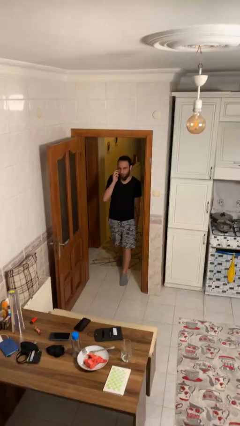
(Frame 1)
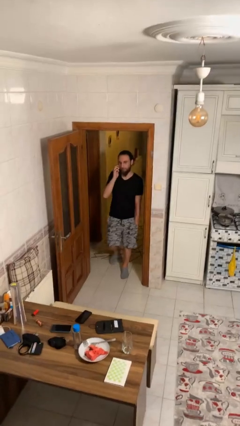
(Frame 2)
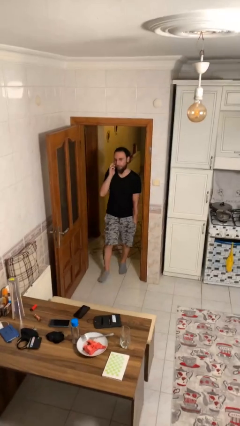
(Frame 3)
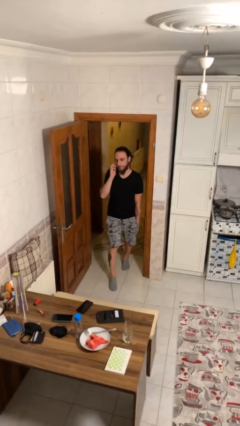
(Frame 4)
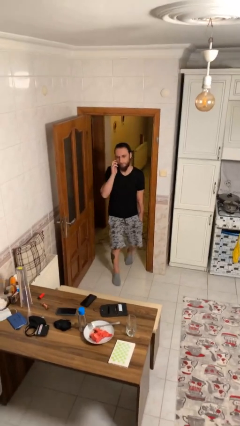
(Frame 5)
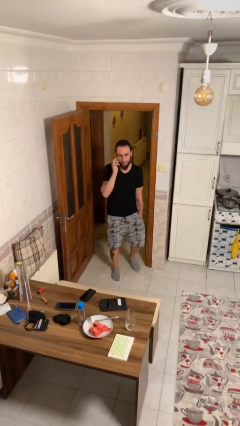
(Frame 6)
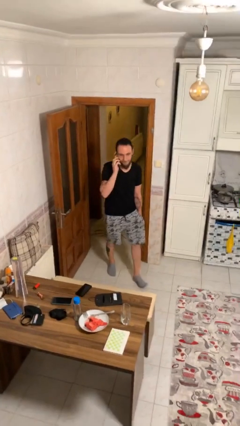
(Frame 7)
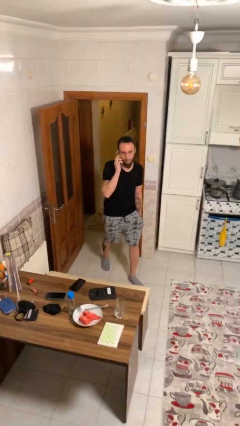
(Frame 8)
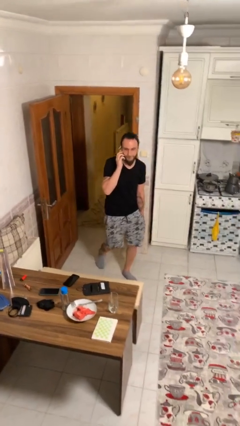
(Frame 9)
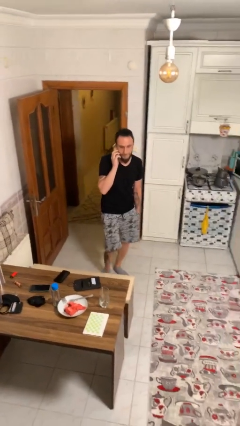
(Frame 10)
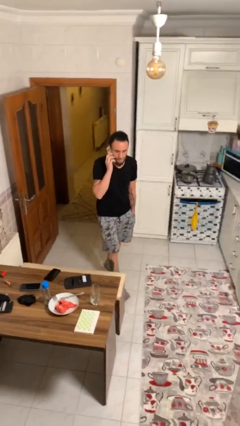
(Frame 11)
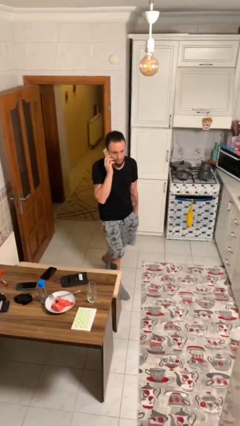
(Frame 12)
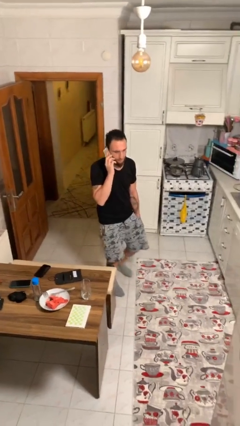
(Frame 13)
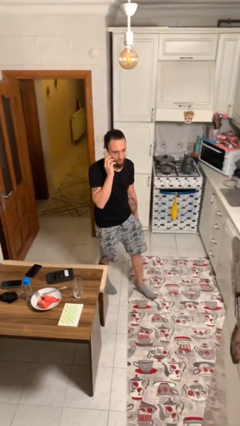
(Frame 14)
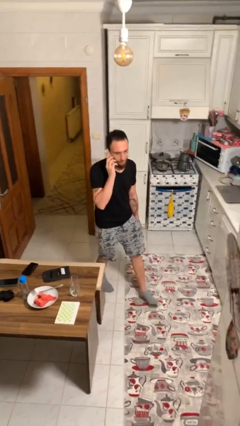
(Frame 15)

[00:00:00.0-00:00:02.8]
person enters scene through structure

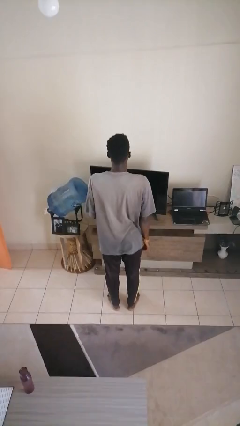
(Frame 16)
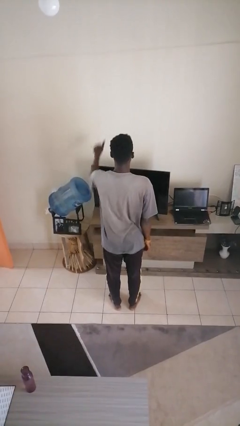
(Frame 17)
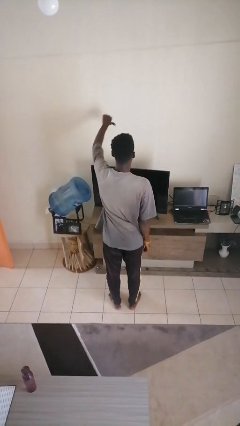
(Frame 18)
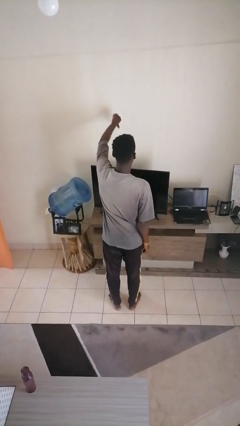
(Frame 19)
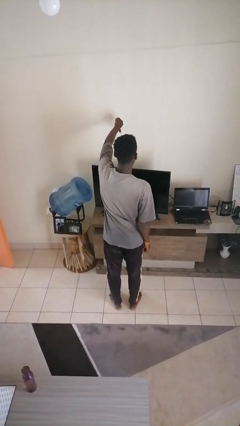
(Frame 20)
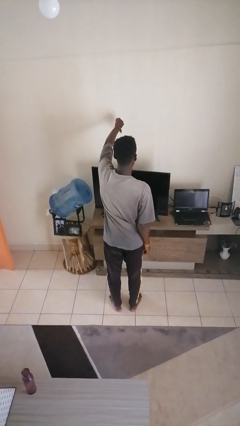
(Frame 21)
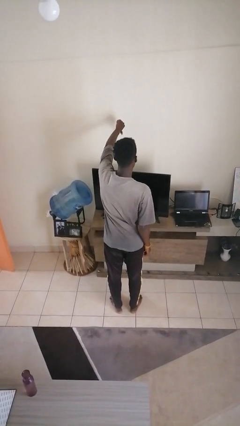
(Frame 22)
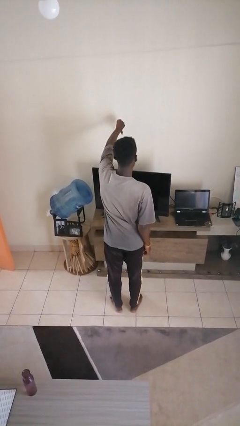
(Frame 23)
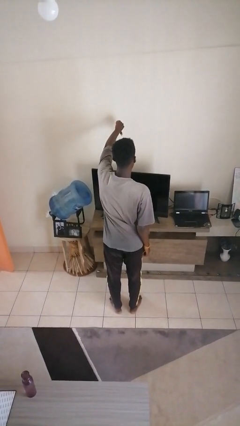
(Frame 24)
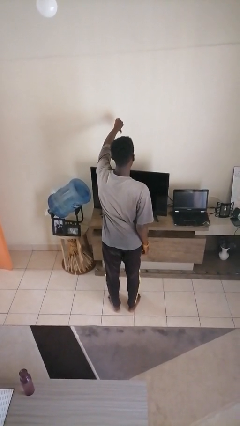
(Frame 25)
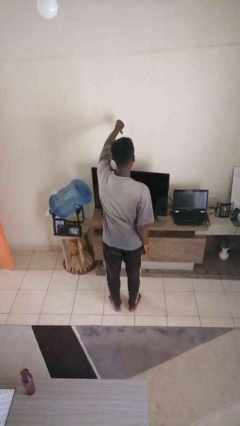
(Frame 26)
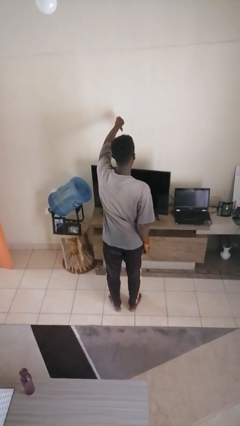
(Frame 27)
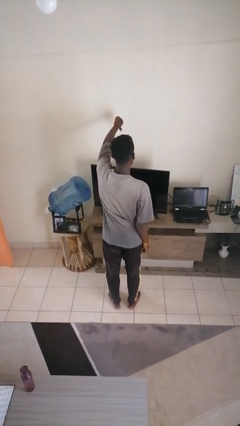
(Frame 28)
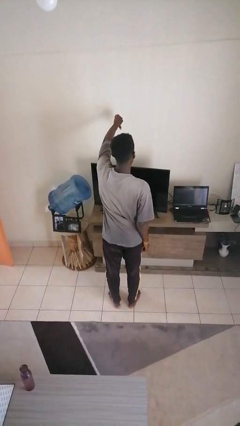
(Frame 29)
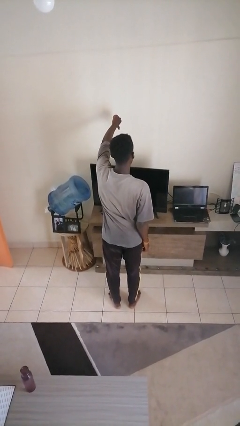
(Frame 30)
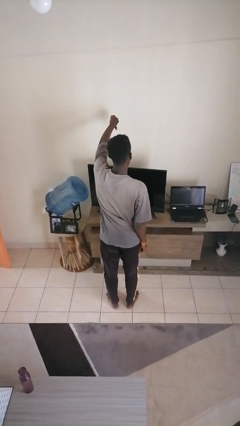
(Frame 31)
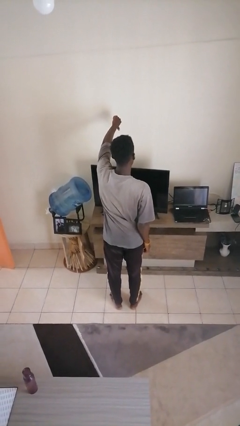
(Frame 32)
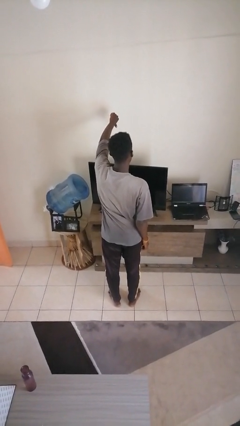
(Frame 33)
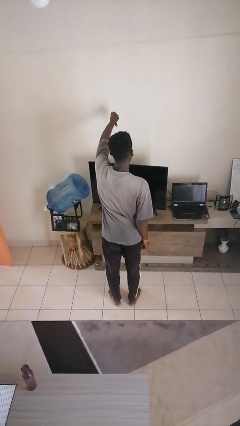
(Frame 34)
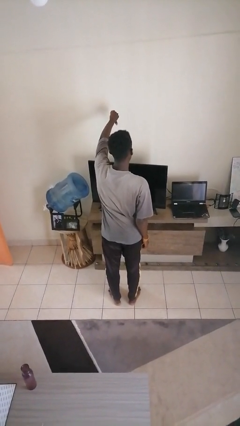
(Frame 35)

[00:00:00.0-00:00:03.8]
person gestures thumbs down

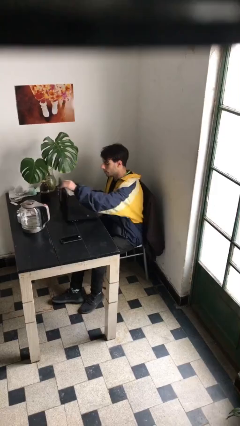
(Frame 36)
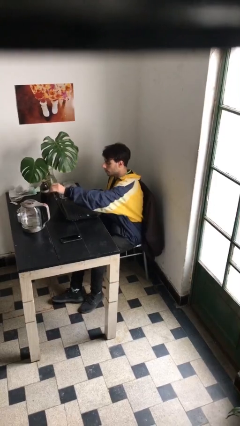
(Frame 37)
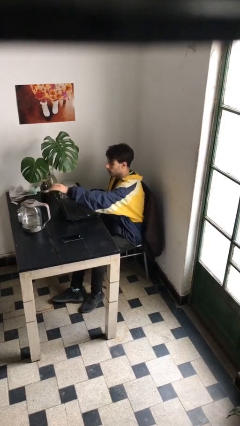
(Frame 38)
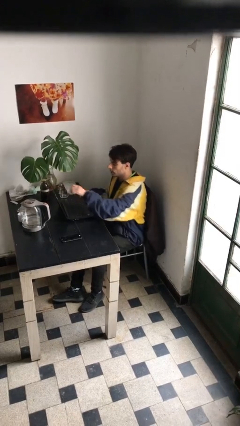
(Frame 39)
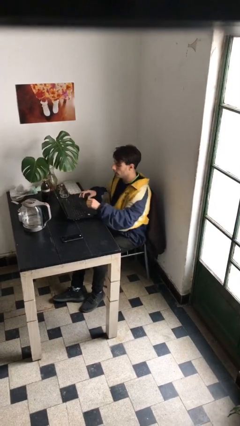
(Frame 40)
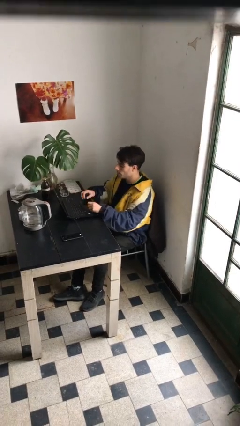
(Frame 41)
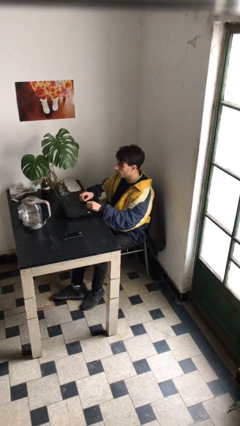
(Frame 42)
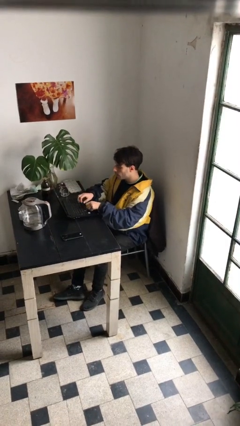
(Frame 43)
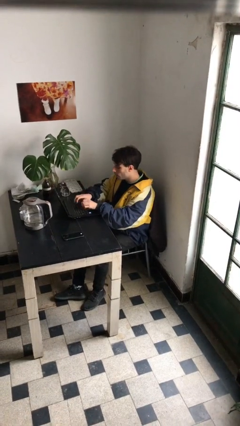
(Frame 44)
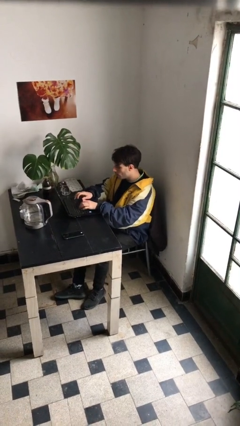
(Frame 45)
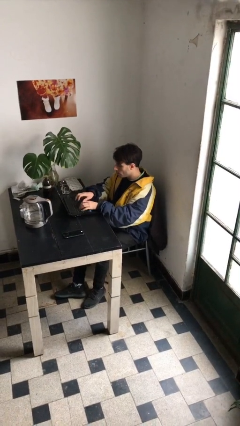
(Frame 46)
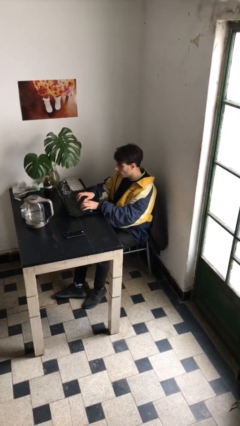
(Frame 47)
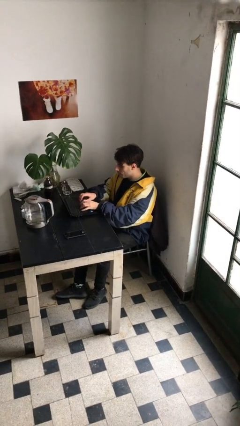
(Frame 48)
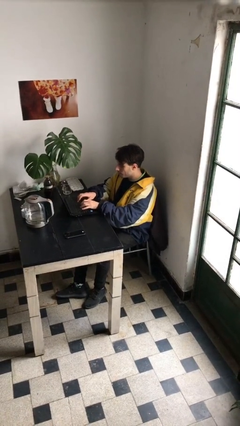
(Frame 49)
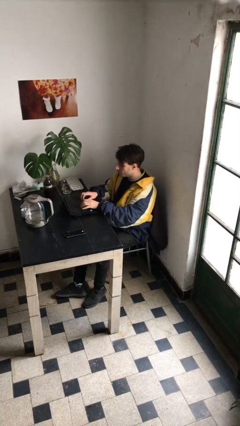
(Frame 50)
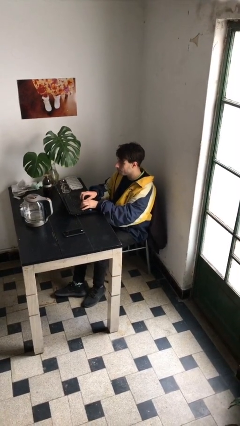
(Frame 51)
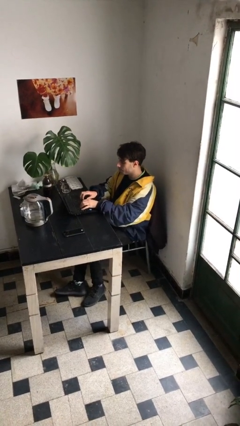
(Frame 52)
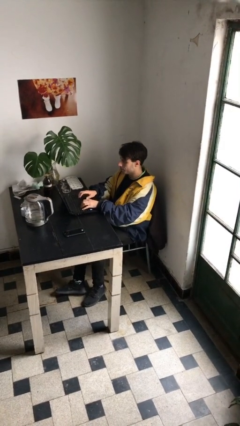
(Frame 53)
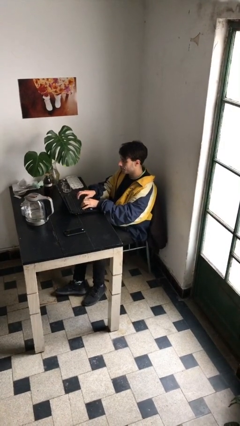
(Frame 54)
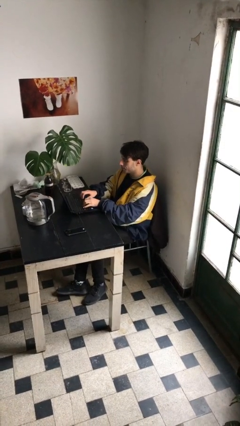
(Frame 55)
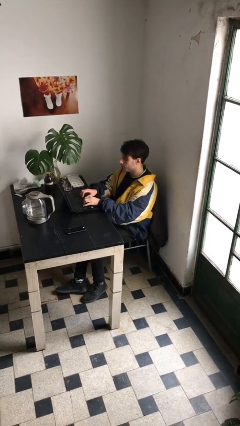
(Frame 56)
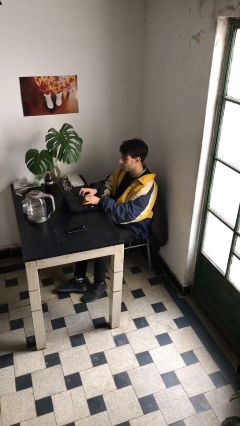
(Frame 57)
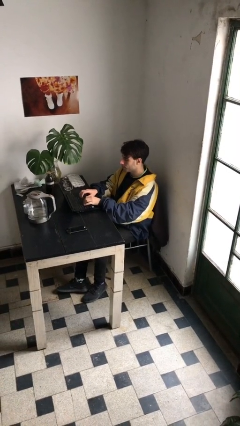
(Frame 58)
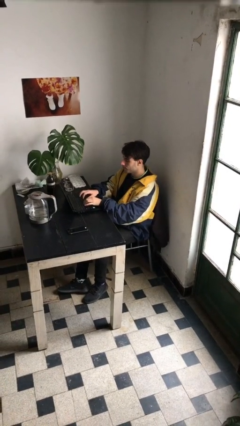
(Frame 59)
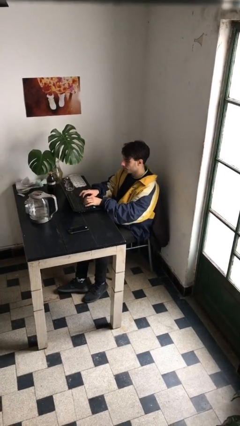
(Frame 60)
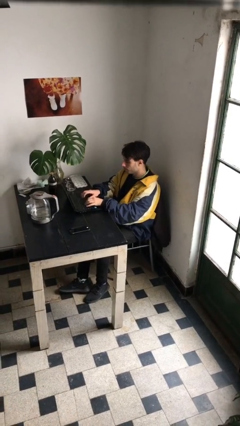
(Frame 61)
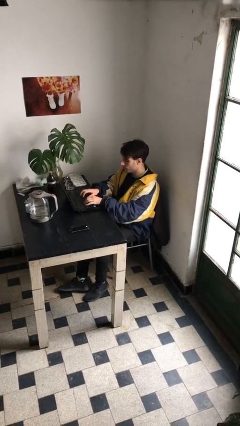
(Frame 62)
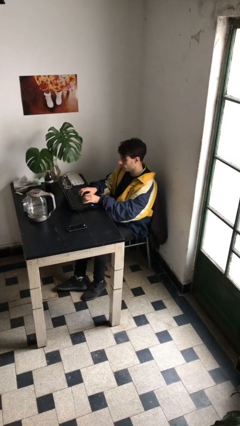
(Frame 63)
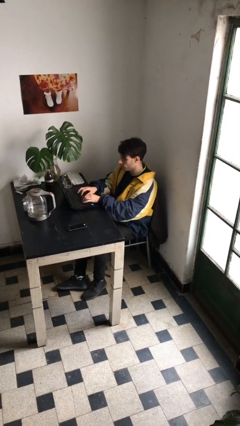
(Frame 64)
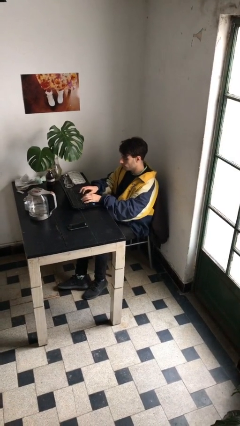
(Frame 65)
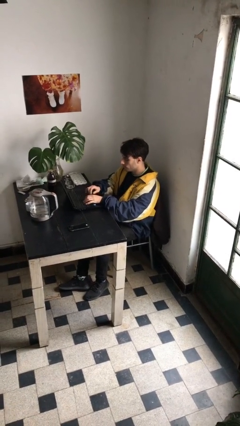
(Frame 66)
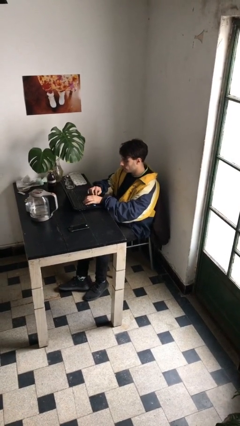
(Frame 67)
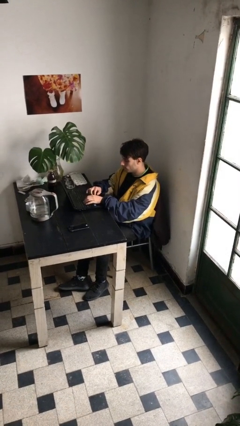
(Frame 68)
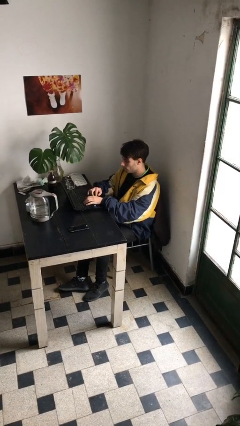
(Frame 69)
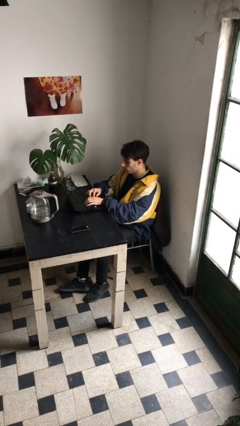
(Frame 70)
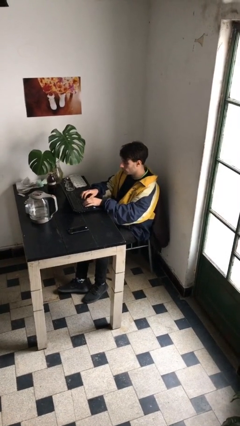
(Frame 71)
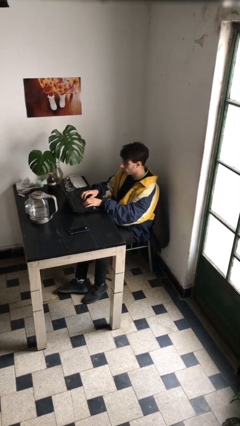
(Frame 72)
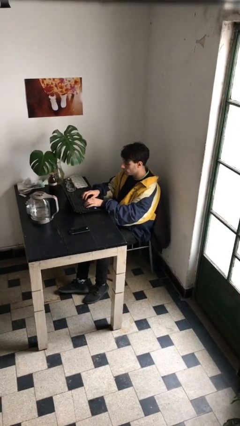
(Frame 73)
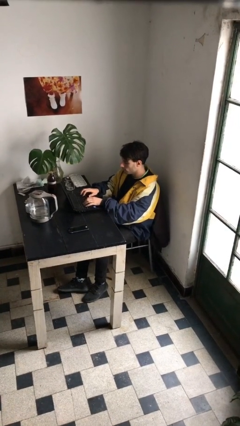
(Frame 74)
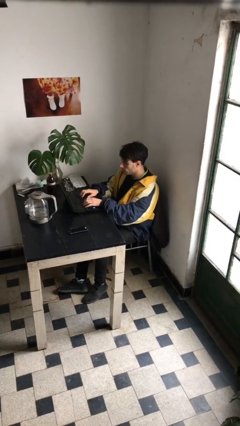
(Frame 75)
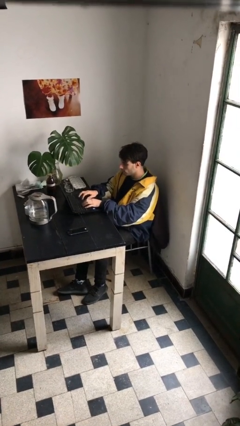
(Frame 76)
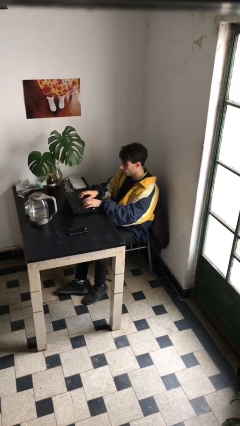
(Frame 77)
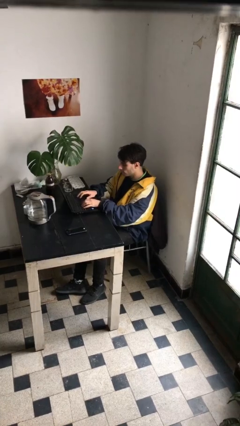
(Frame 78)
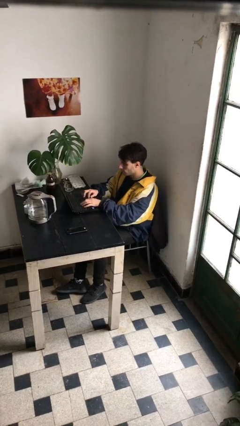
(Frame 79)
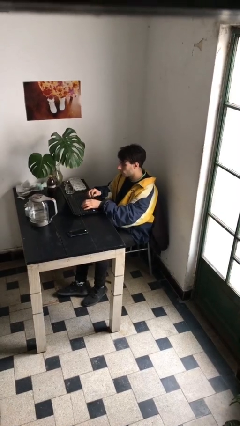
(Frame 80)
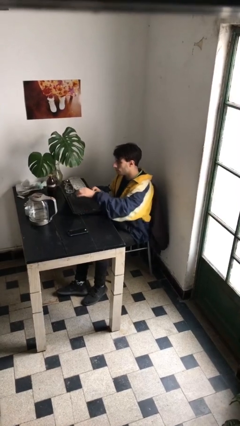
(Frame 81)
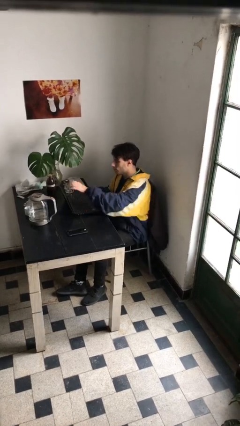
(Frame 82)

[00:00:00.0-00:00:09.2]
person interacts with laptop

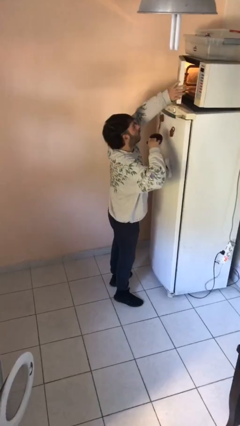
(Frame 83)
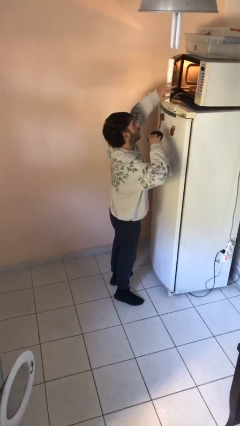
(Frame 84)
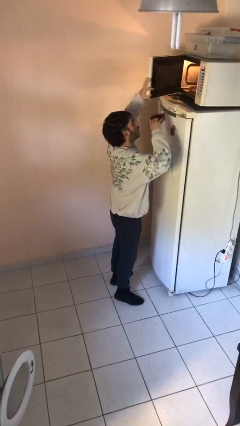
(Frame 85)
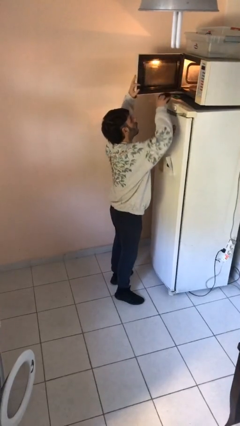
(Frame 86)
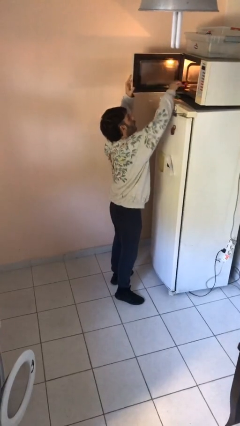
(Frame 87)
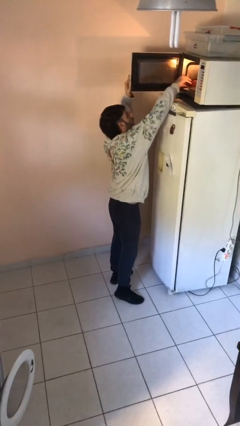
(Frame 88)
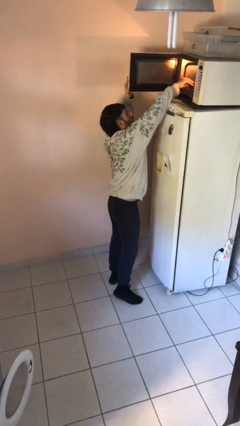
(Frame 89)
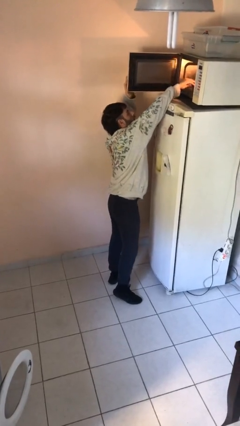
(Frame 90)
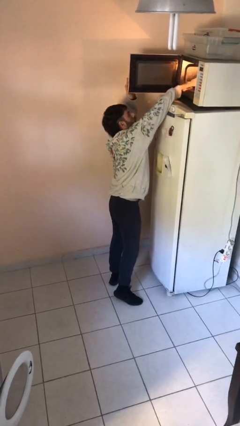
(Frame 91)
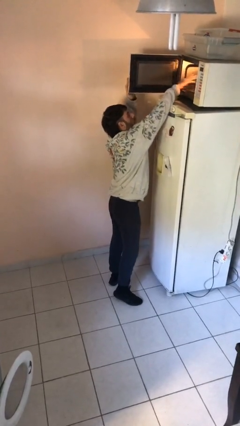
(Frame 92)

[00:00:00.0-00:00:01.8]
person puts object into microwave

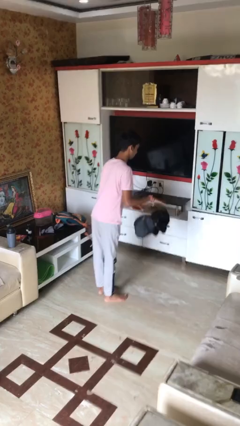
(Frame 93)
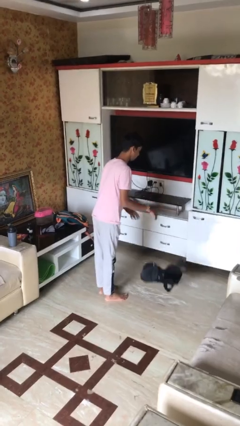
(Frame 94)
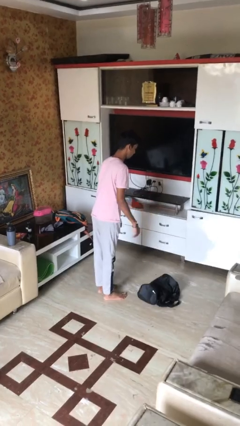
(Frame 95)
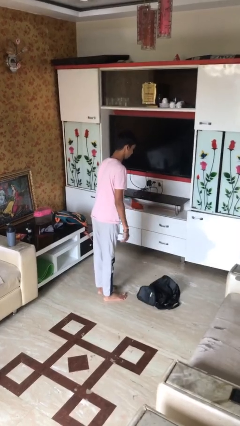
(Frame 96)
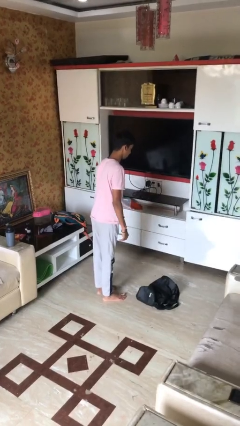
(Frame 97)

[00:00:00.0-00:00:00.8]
person drops object
